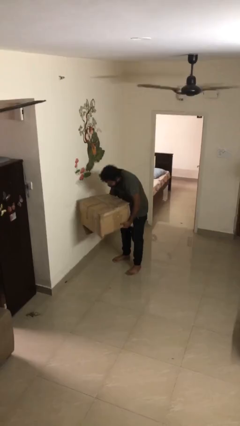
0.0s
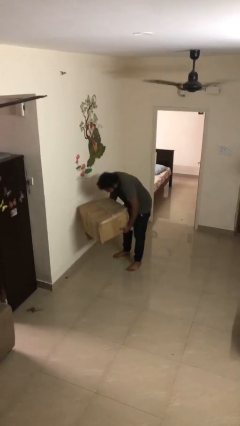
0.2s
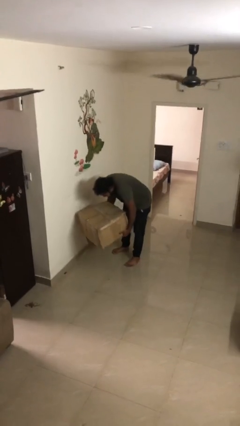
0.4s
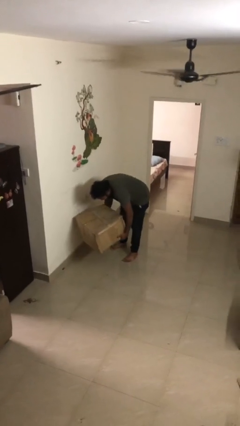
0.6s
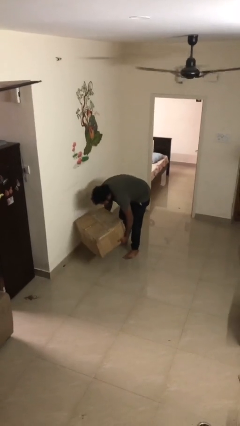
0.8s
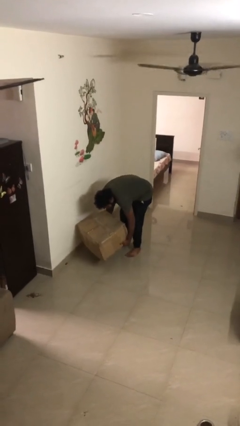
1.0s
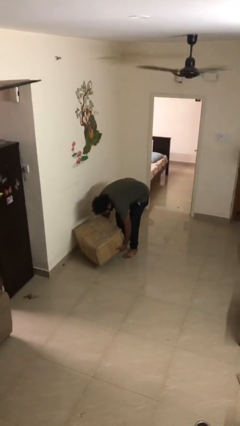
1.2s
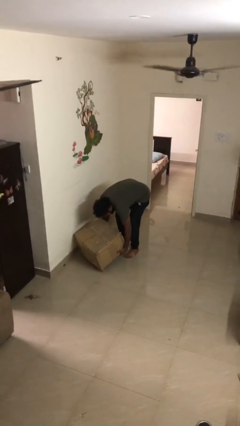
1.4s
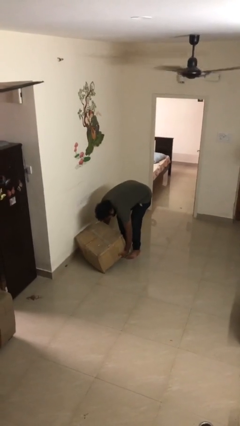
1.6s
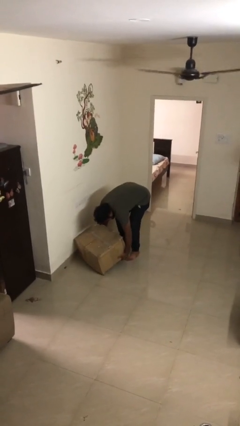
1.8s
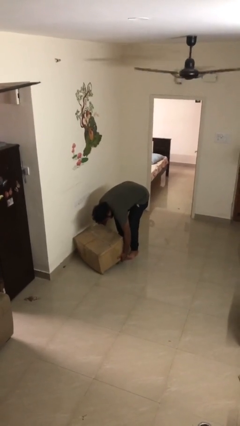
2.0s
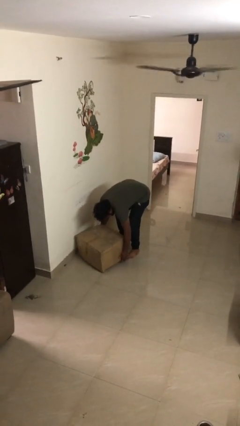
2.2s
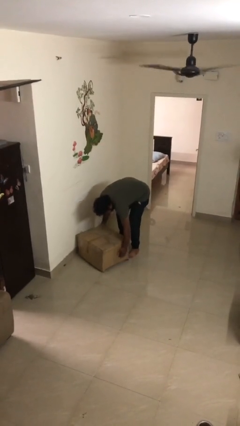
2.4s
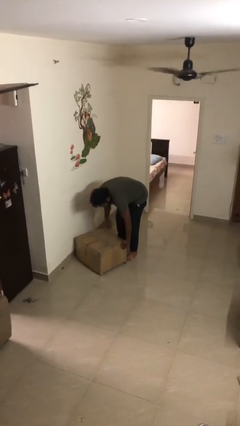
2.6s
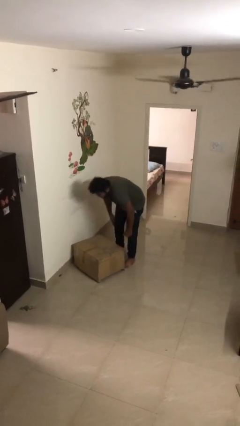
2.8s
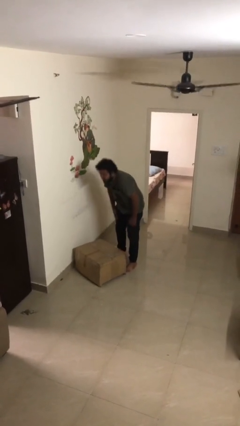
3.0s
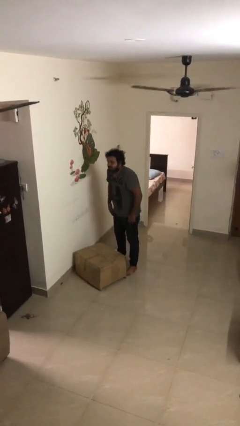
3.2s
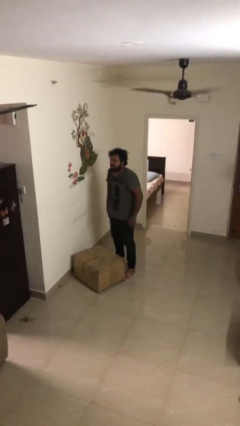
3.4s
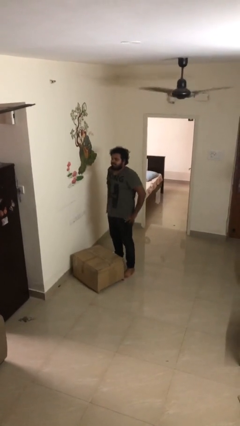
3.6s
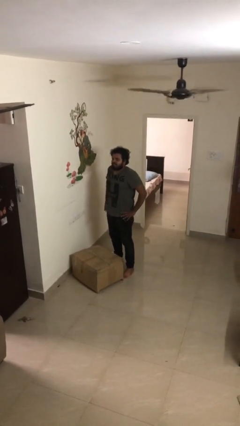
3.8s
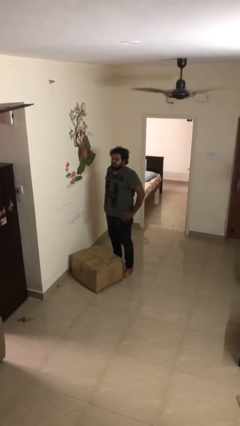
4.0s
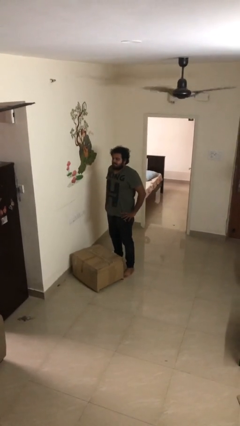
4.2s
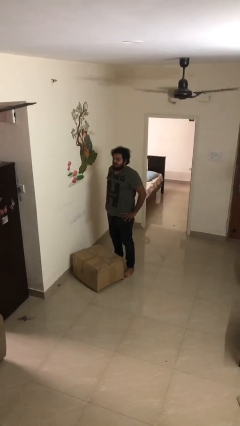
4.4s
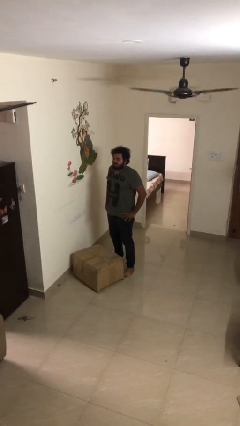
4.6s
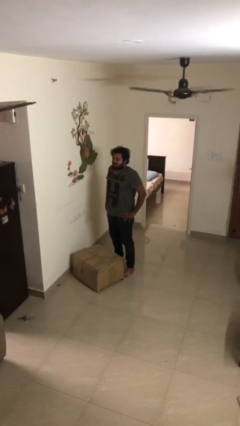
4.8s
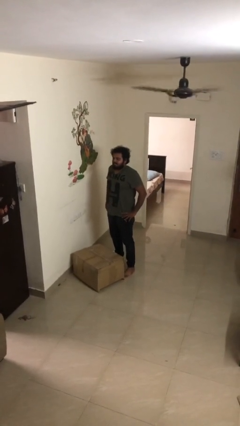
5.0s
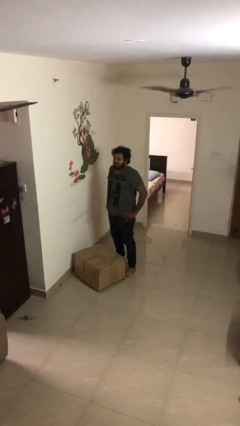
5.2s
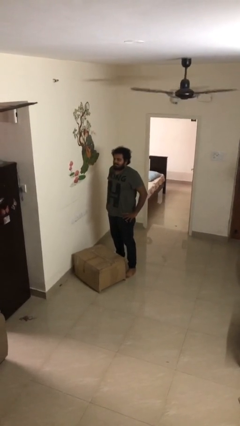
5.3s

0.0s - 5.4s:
person puts down object on floor

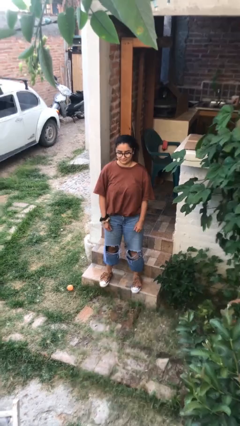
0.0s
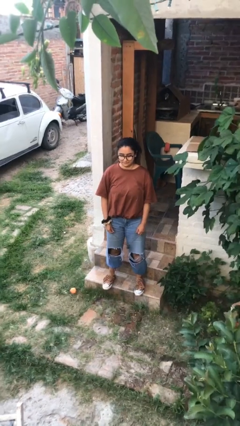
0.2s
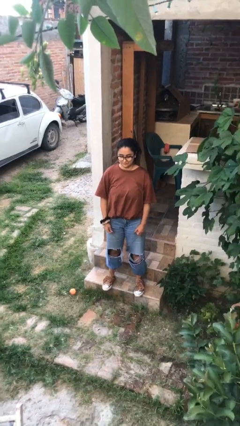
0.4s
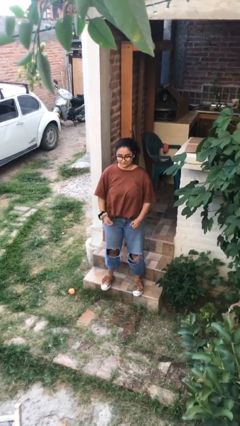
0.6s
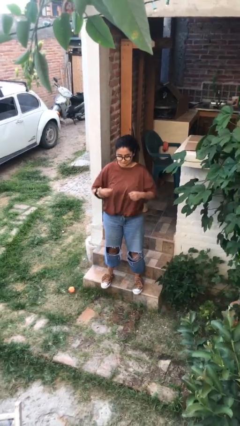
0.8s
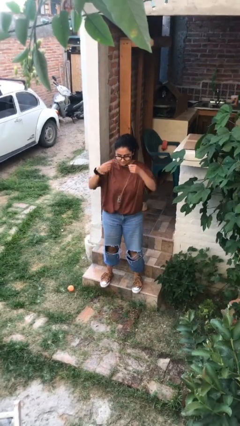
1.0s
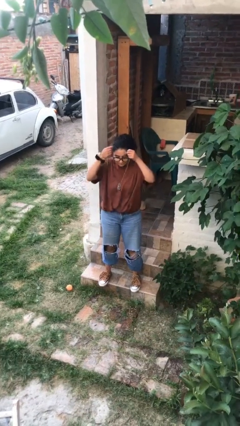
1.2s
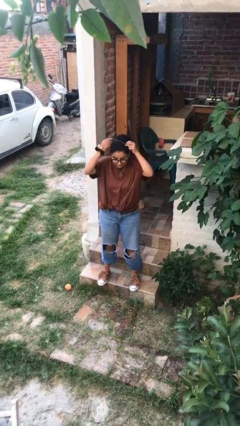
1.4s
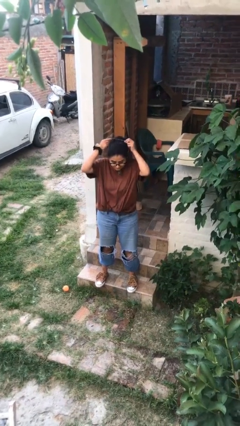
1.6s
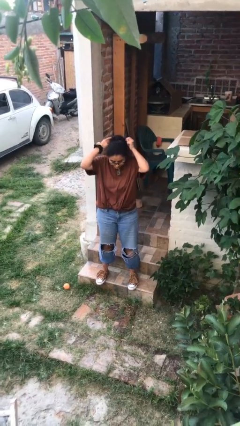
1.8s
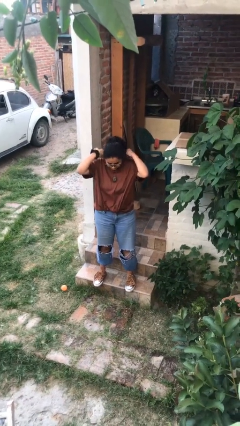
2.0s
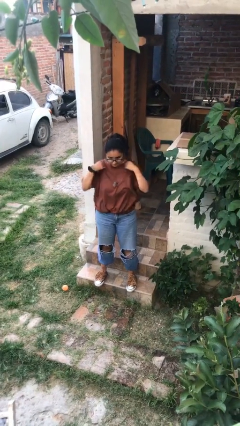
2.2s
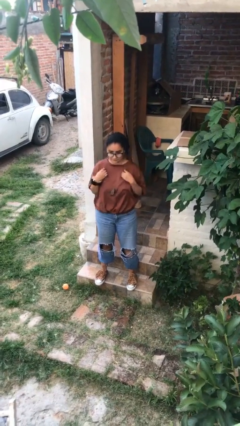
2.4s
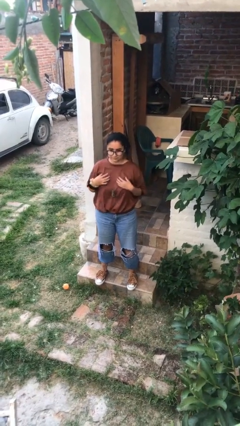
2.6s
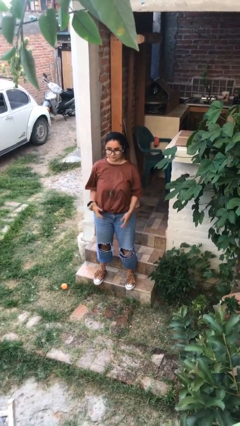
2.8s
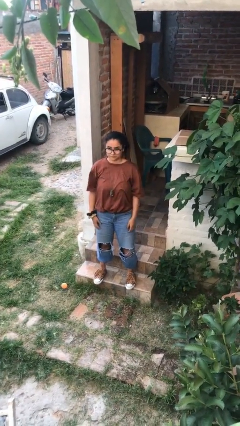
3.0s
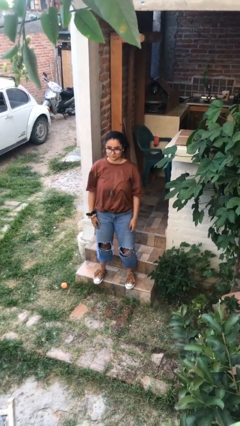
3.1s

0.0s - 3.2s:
person puts on necklace

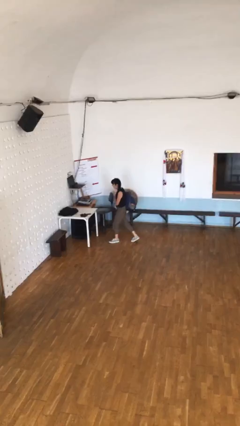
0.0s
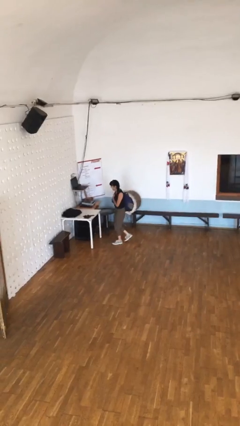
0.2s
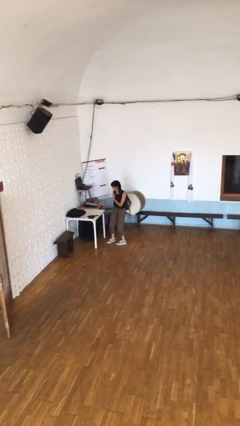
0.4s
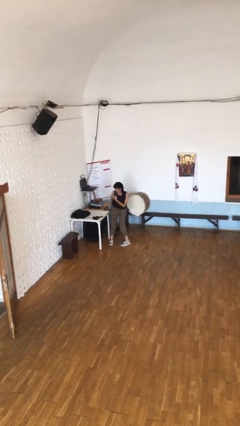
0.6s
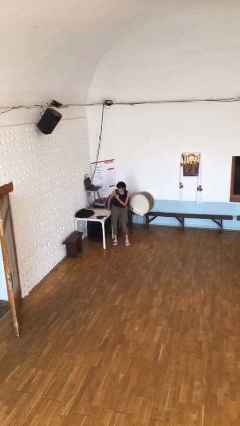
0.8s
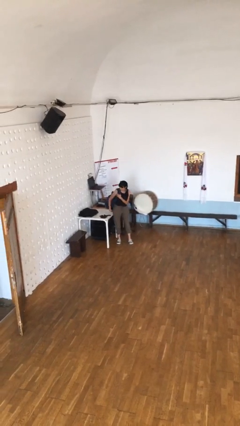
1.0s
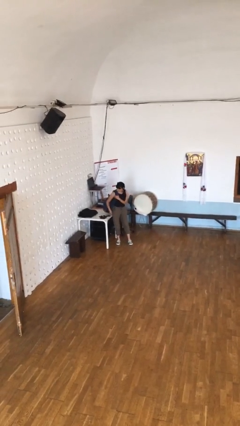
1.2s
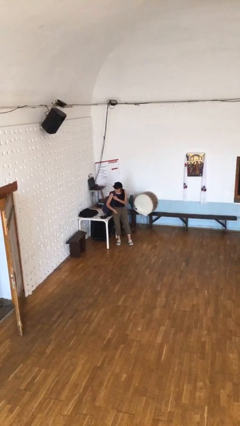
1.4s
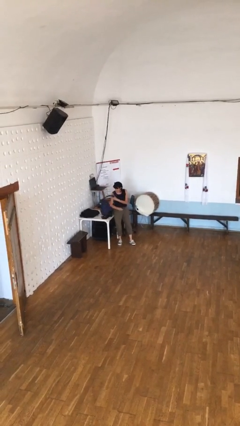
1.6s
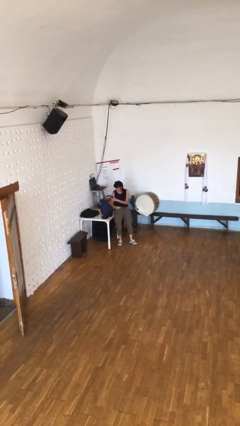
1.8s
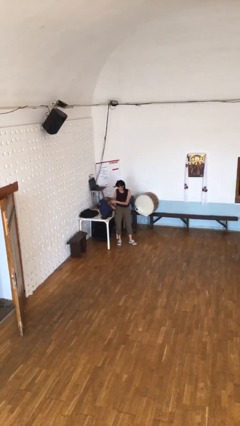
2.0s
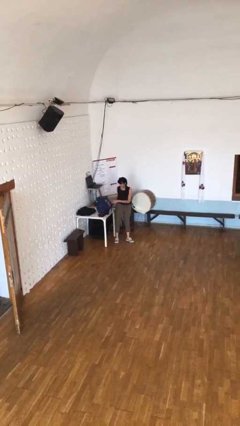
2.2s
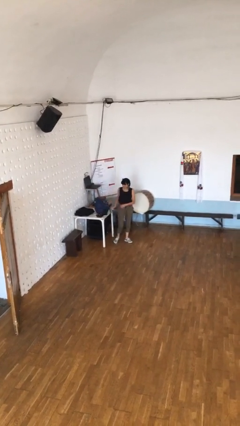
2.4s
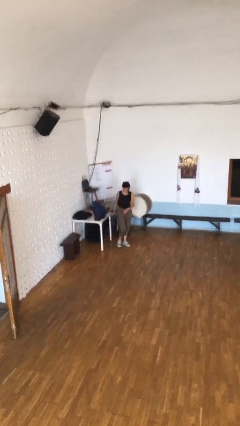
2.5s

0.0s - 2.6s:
person puts down object on table

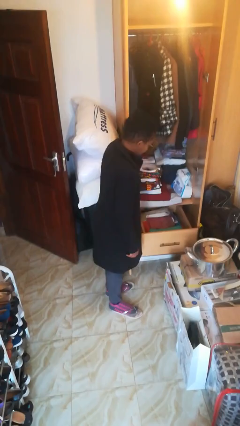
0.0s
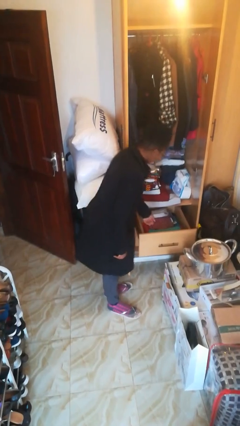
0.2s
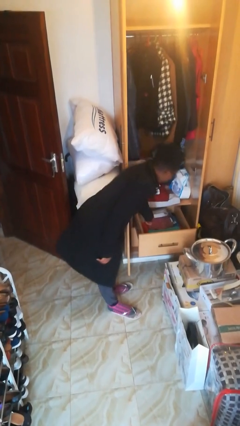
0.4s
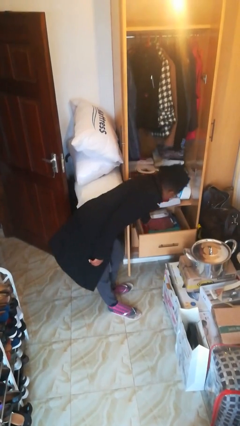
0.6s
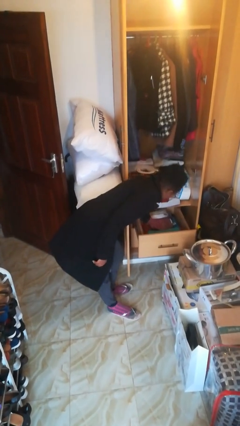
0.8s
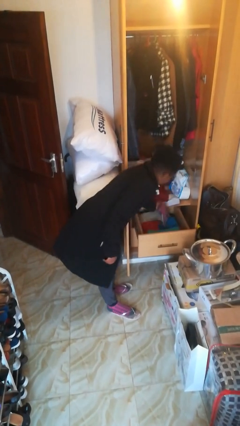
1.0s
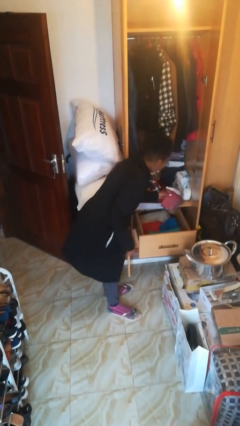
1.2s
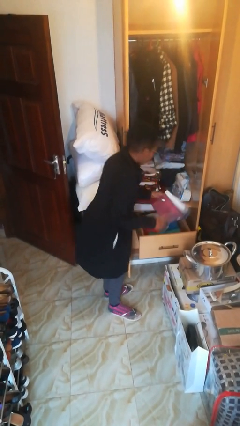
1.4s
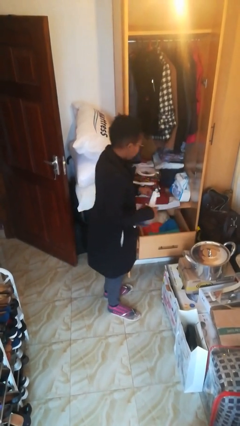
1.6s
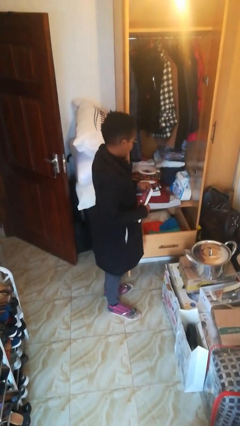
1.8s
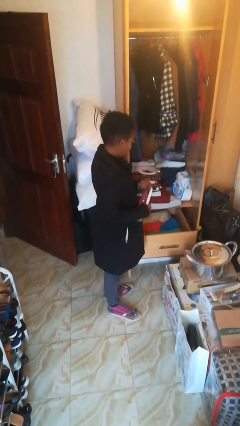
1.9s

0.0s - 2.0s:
person takes clothes from dresser

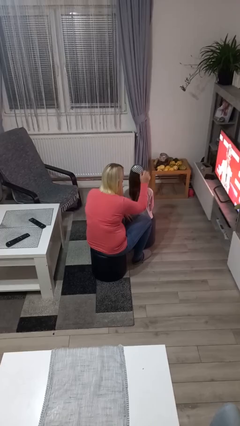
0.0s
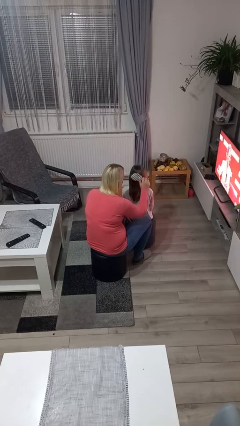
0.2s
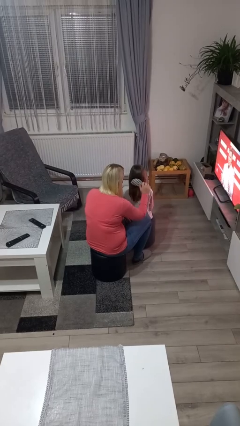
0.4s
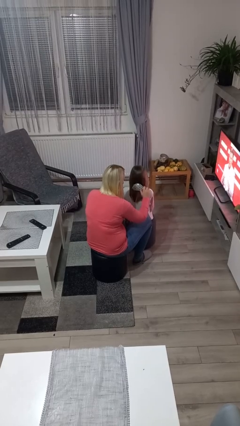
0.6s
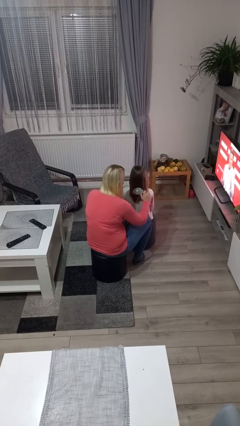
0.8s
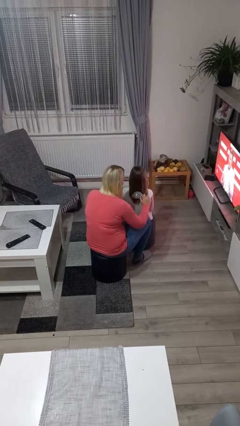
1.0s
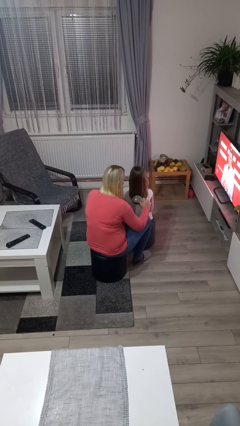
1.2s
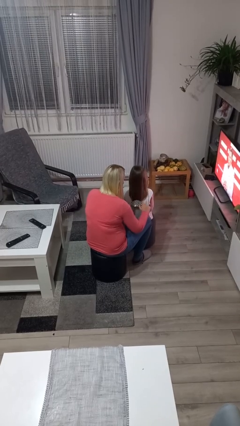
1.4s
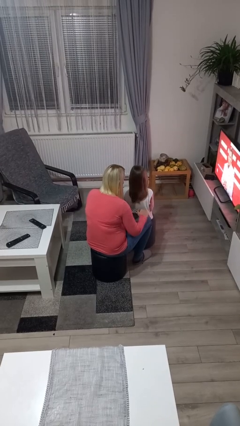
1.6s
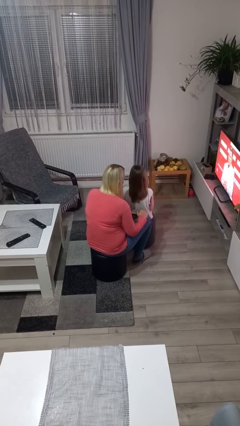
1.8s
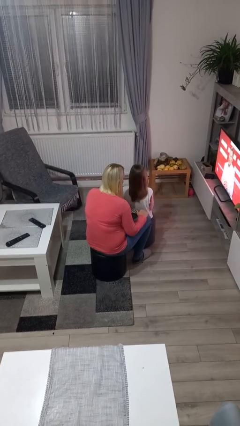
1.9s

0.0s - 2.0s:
person brushes hair of person

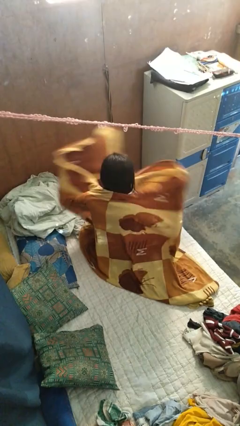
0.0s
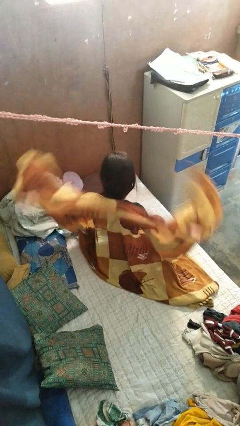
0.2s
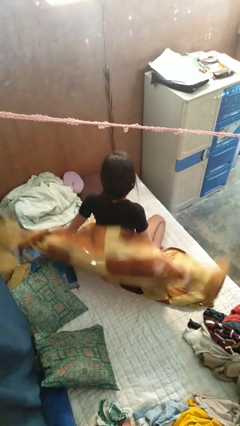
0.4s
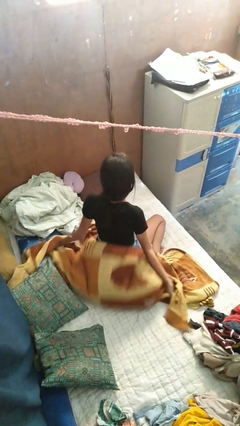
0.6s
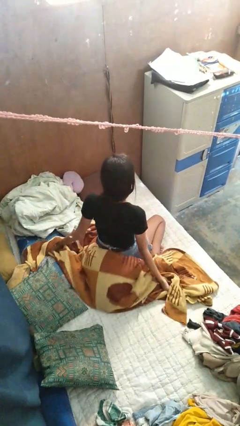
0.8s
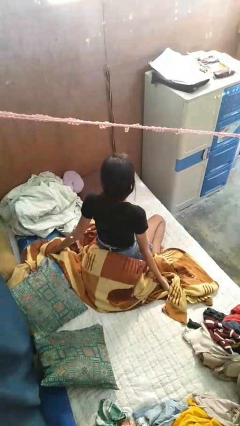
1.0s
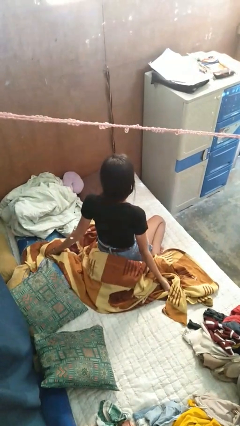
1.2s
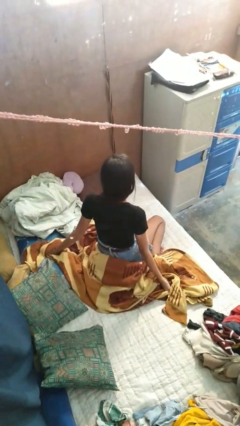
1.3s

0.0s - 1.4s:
person uncovers with blanket

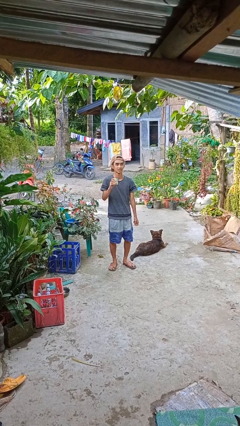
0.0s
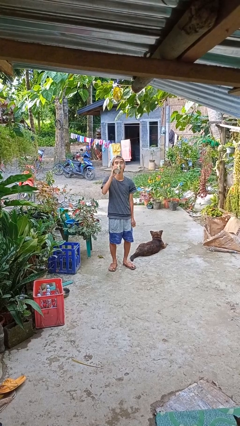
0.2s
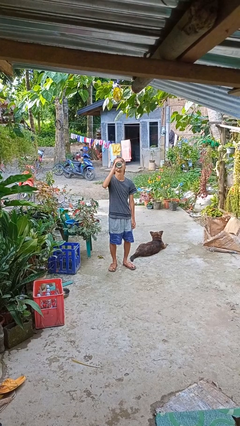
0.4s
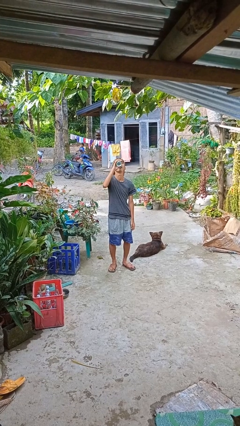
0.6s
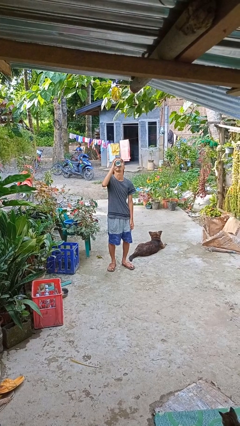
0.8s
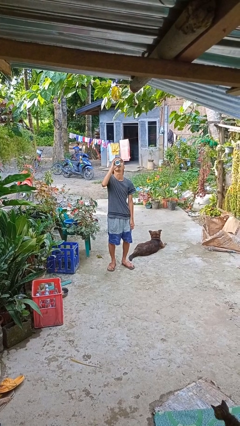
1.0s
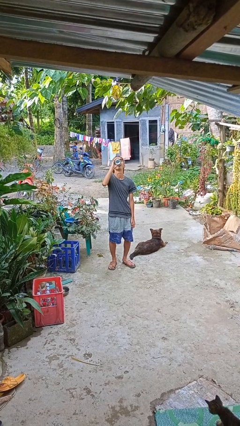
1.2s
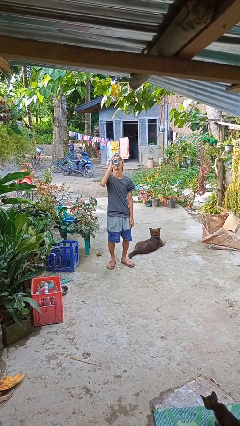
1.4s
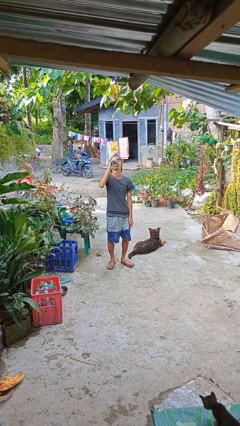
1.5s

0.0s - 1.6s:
person drinks from beverage can
